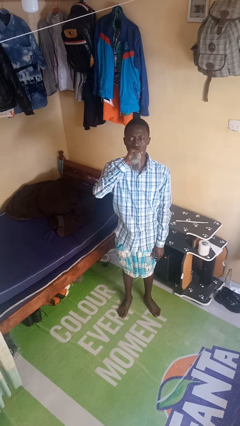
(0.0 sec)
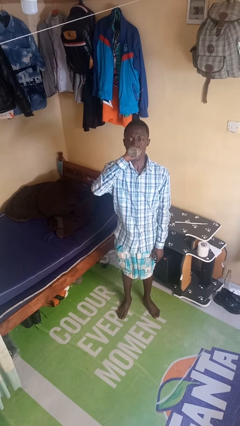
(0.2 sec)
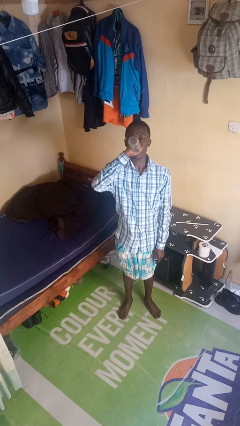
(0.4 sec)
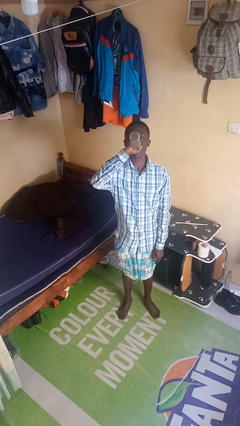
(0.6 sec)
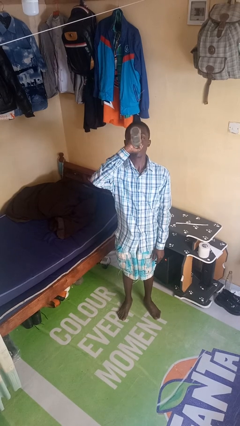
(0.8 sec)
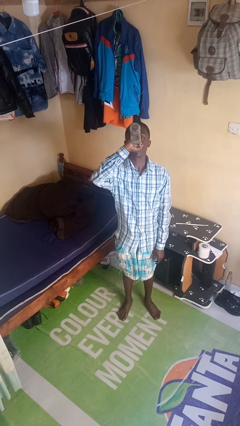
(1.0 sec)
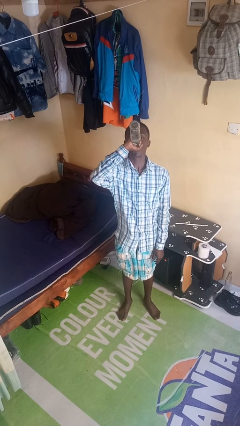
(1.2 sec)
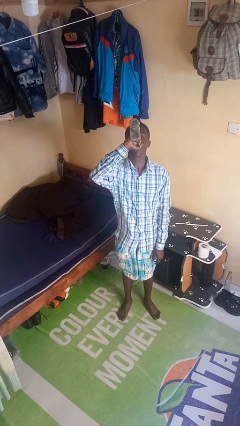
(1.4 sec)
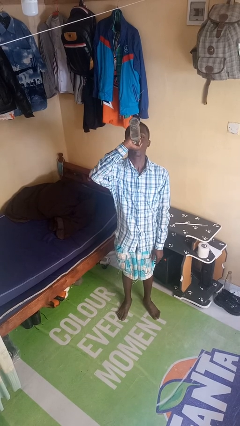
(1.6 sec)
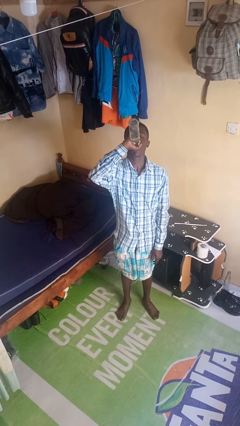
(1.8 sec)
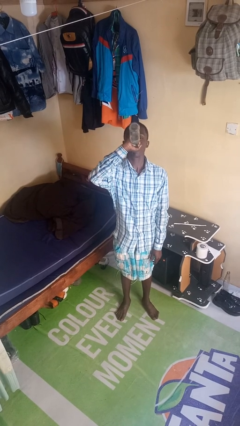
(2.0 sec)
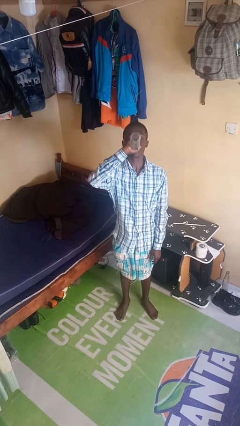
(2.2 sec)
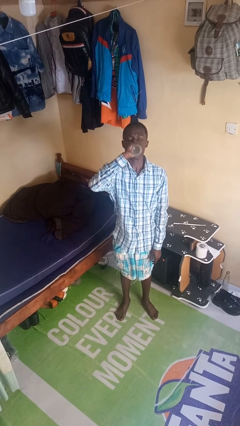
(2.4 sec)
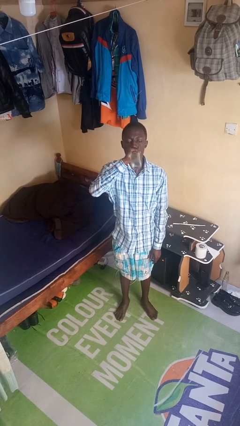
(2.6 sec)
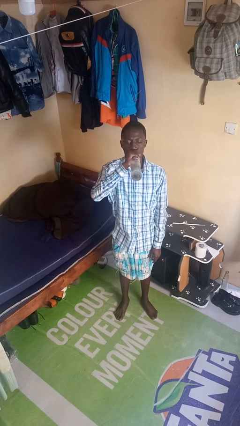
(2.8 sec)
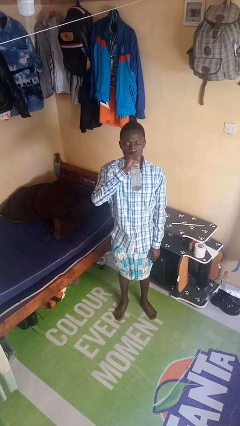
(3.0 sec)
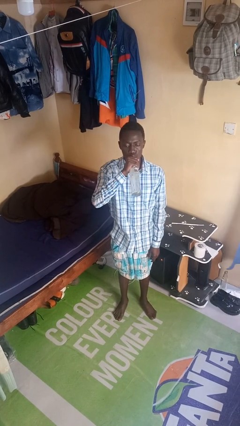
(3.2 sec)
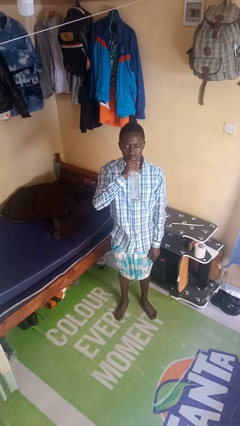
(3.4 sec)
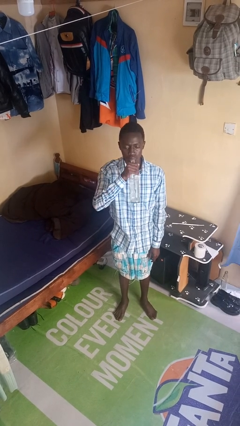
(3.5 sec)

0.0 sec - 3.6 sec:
person drinks from bottle

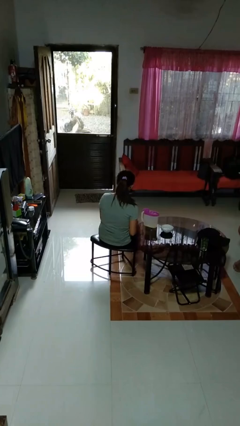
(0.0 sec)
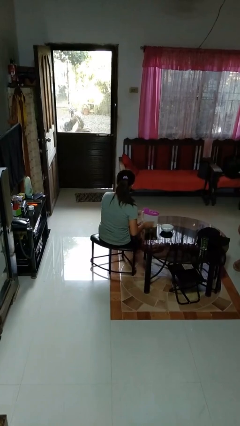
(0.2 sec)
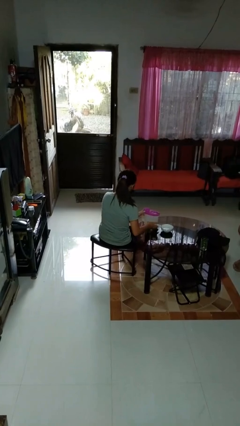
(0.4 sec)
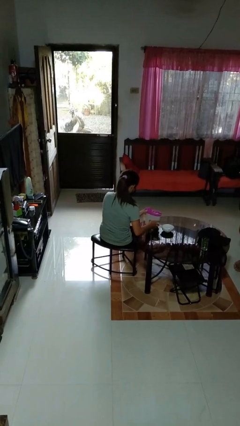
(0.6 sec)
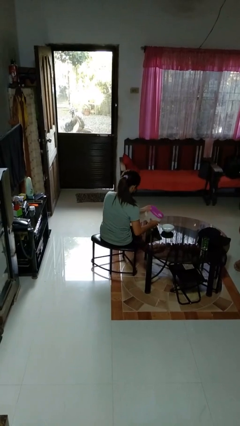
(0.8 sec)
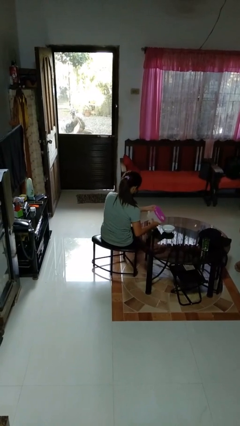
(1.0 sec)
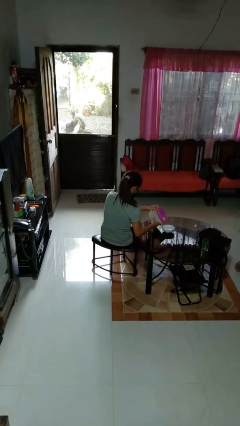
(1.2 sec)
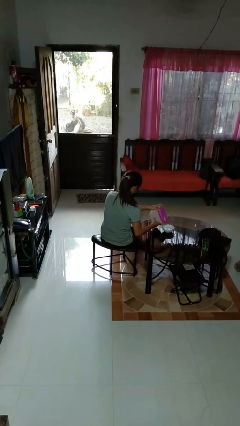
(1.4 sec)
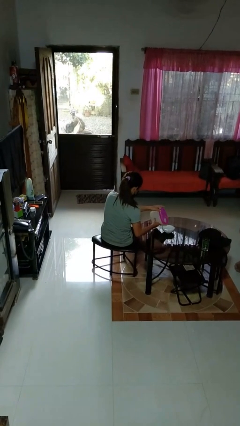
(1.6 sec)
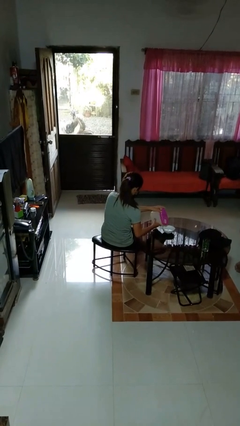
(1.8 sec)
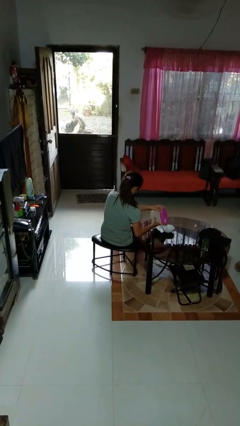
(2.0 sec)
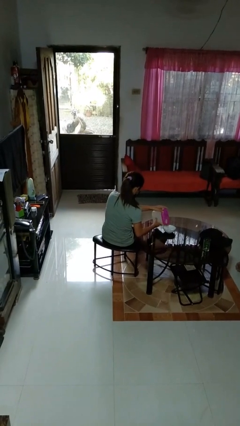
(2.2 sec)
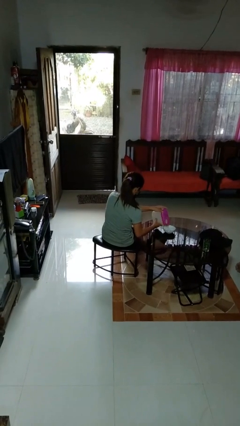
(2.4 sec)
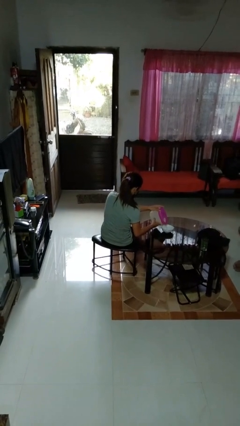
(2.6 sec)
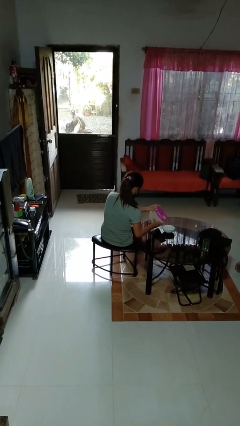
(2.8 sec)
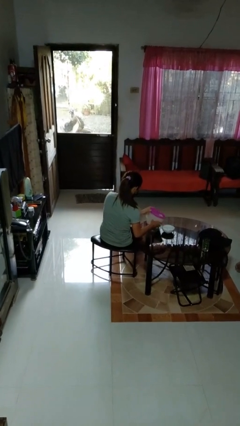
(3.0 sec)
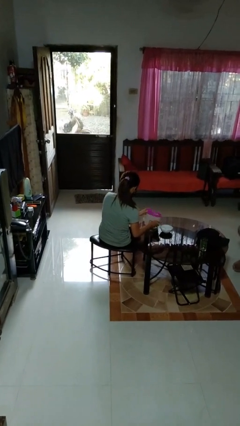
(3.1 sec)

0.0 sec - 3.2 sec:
person pours into bowl

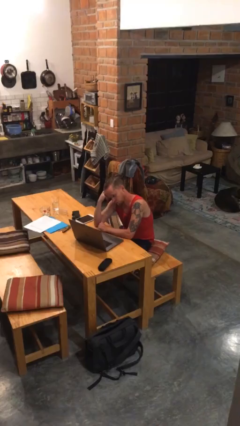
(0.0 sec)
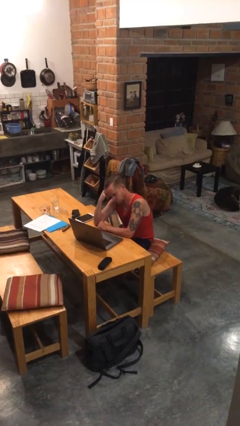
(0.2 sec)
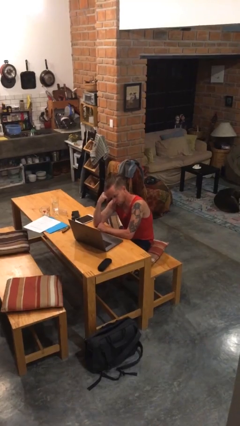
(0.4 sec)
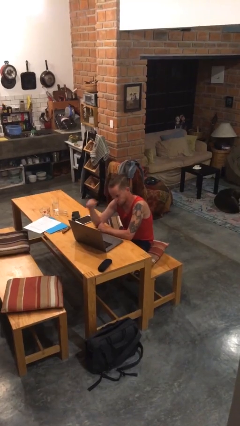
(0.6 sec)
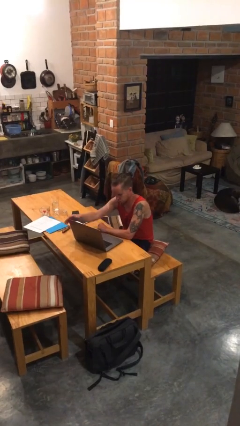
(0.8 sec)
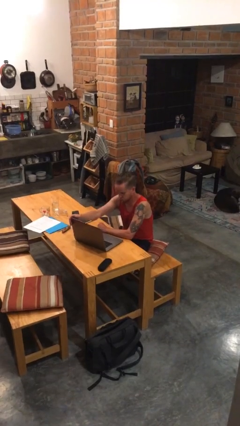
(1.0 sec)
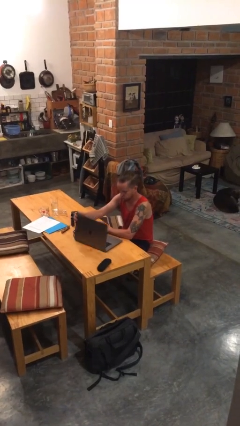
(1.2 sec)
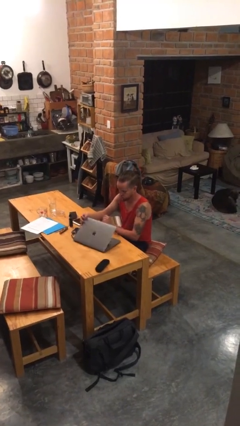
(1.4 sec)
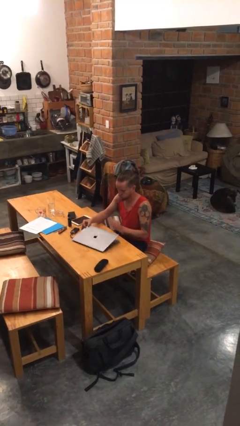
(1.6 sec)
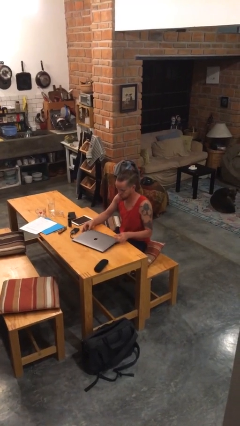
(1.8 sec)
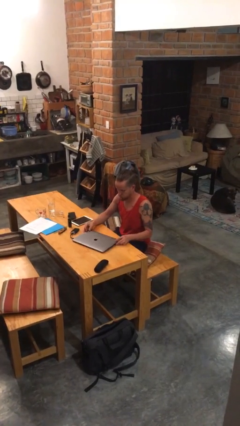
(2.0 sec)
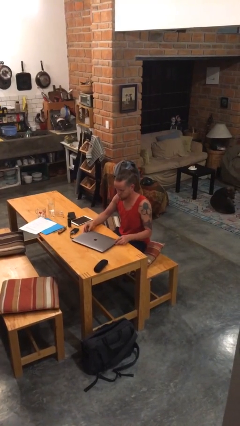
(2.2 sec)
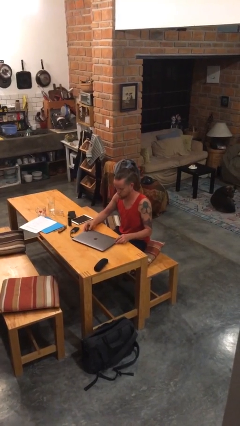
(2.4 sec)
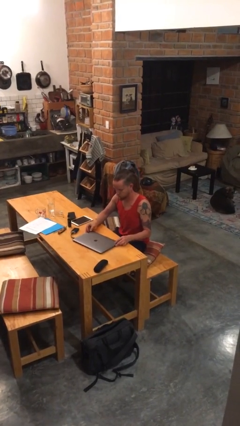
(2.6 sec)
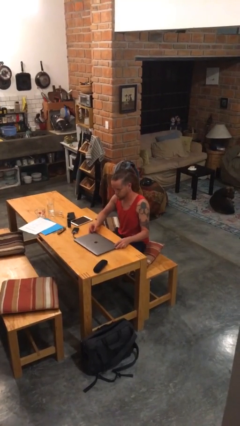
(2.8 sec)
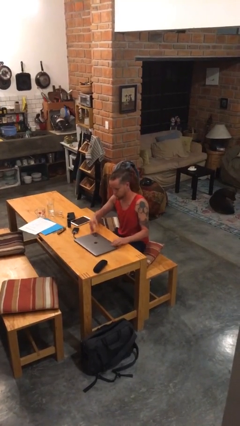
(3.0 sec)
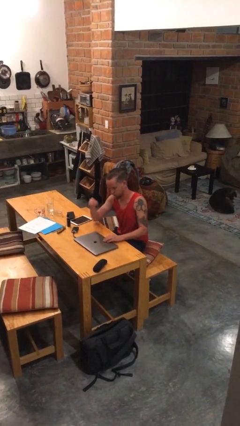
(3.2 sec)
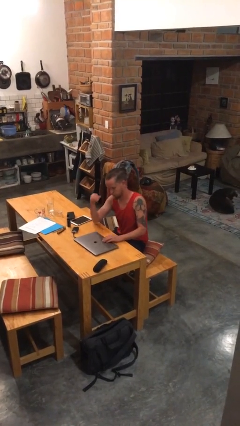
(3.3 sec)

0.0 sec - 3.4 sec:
person closes laptop

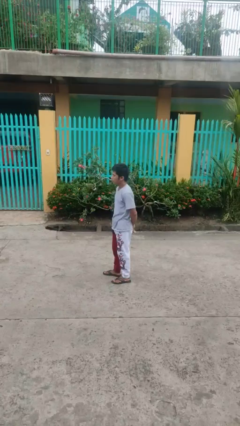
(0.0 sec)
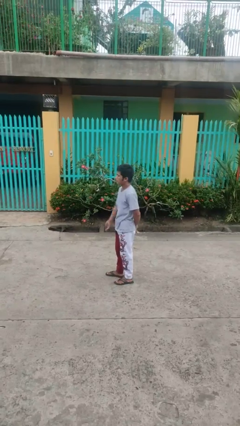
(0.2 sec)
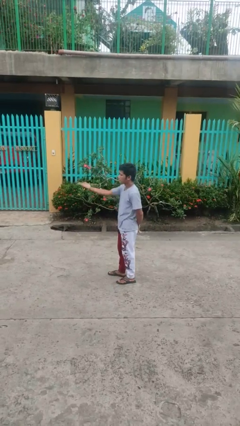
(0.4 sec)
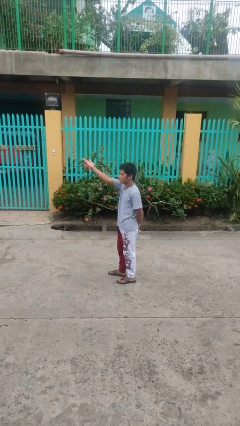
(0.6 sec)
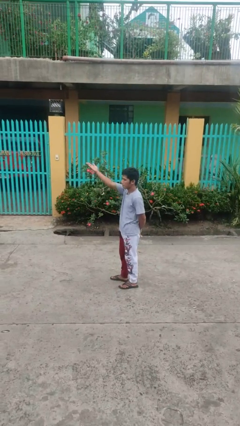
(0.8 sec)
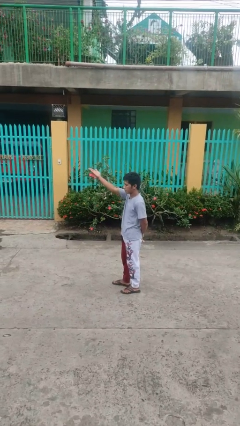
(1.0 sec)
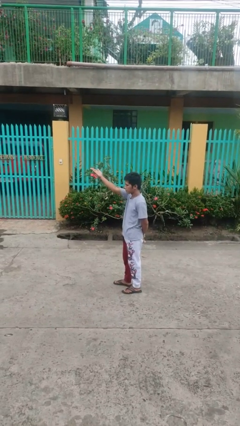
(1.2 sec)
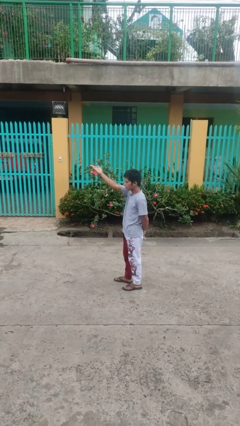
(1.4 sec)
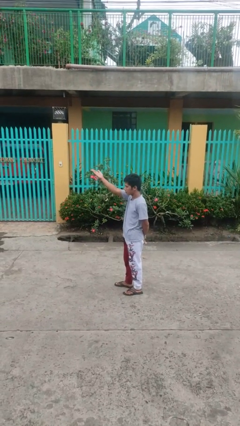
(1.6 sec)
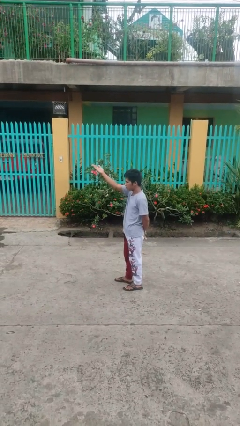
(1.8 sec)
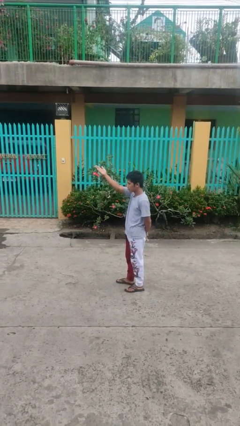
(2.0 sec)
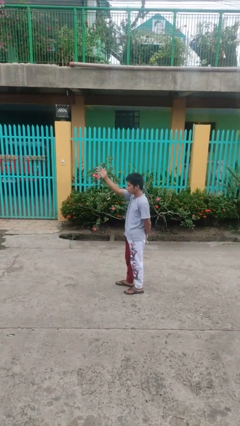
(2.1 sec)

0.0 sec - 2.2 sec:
person gestures swipe up

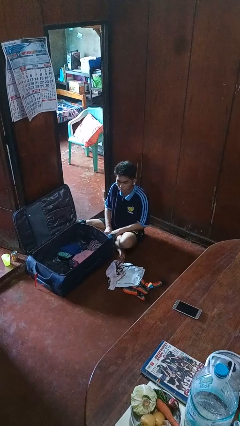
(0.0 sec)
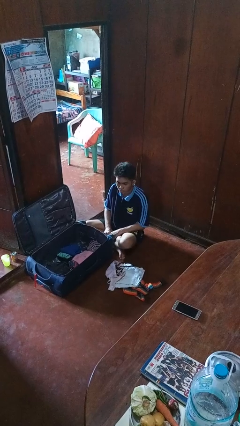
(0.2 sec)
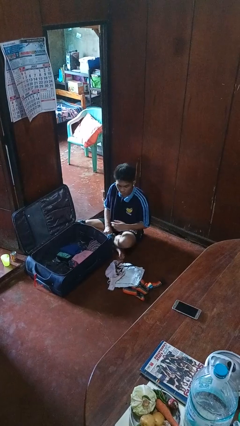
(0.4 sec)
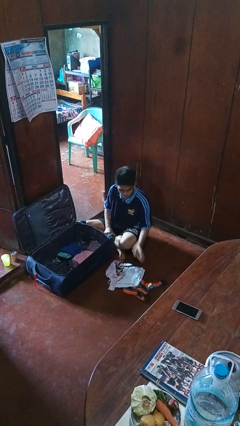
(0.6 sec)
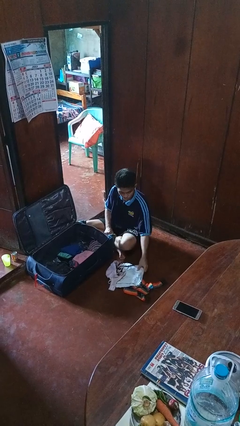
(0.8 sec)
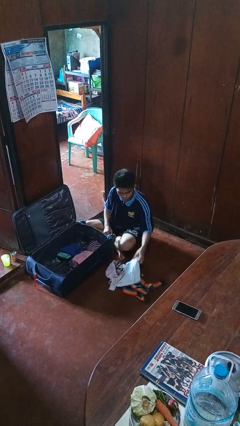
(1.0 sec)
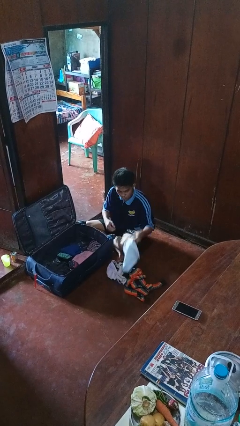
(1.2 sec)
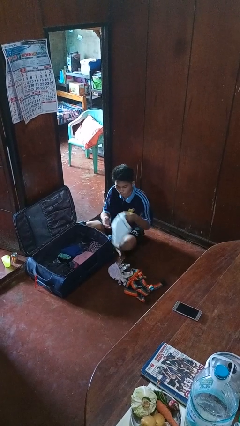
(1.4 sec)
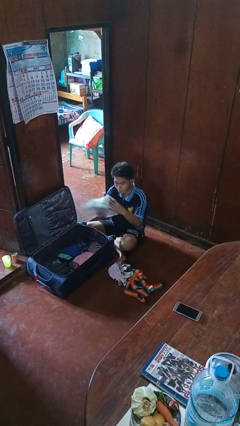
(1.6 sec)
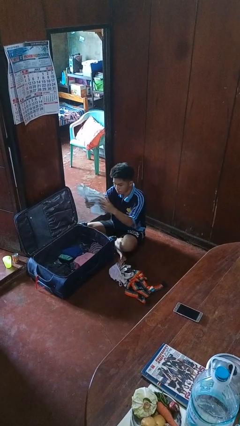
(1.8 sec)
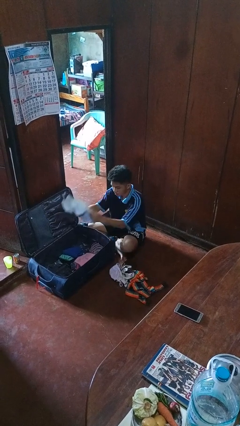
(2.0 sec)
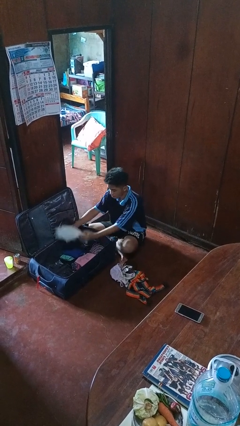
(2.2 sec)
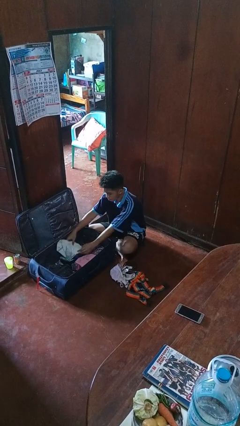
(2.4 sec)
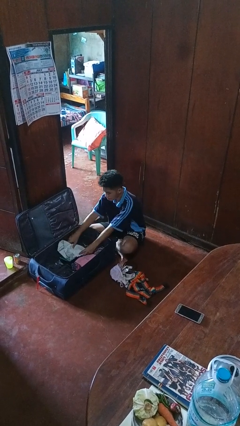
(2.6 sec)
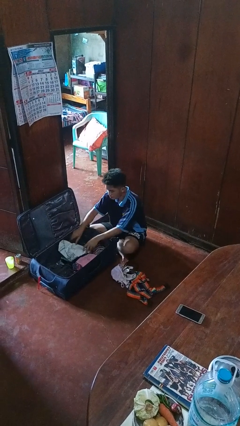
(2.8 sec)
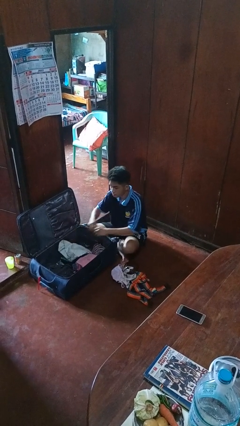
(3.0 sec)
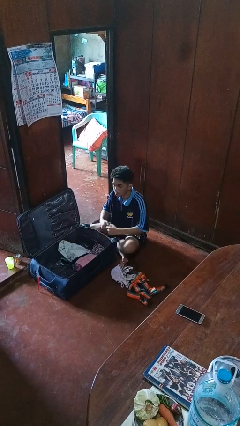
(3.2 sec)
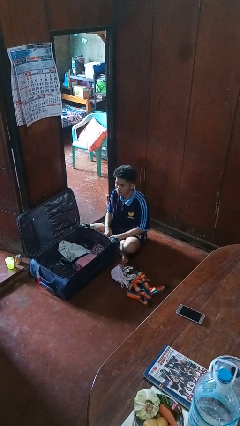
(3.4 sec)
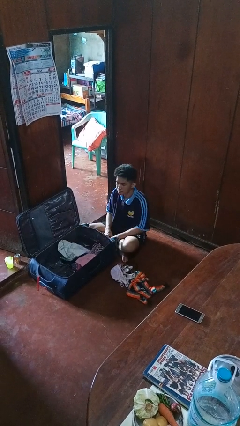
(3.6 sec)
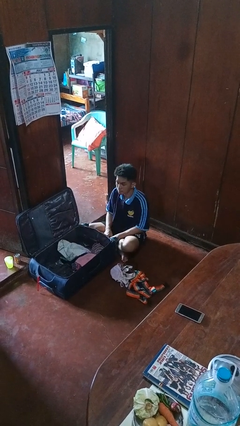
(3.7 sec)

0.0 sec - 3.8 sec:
person loads clothes into suitcase

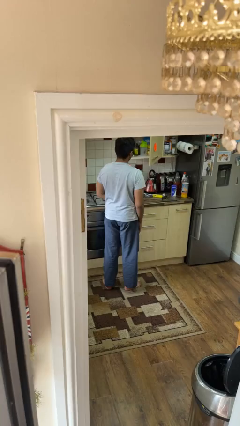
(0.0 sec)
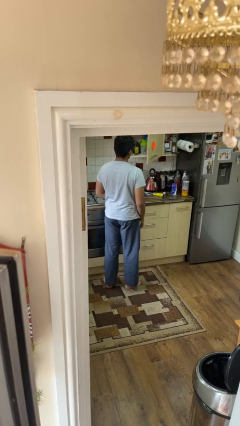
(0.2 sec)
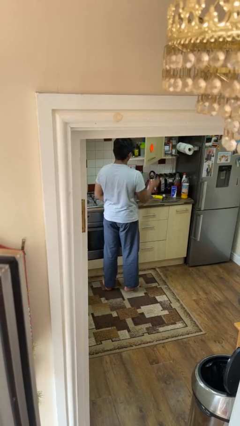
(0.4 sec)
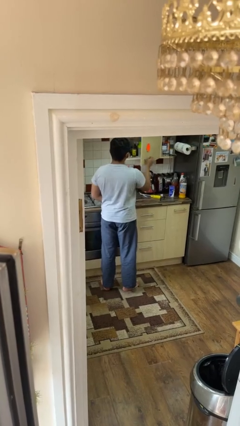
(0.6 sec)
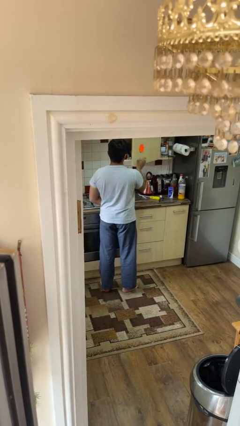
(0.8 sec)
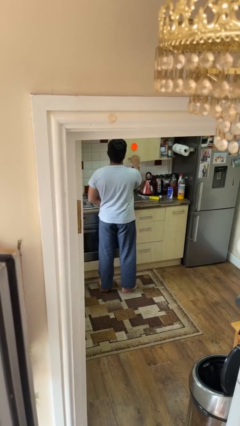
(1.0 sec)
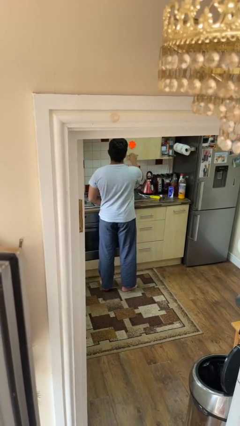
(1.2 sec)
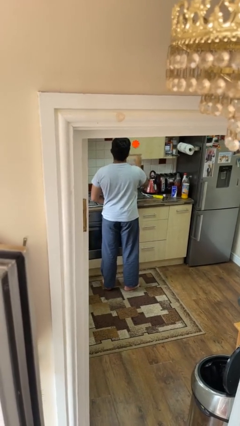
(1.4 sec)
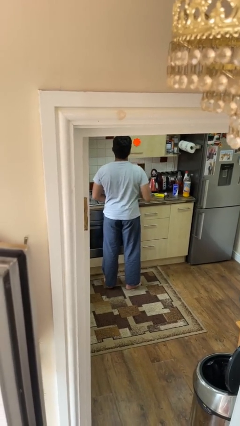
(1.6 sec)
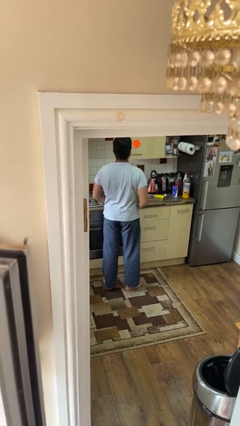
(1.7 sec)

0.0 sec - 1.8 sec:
person closes cabinet
